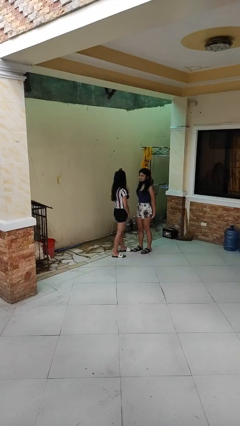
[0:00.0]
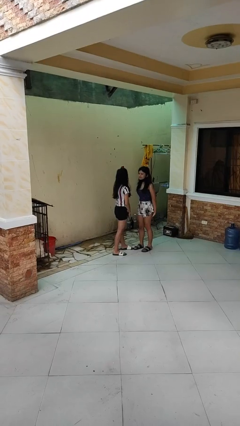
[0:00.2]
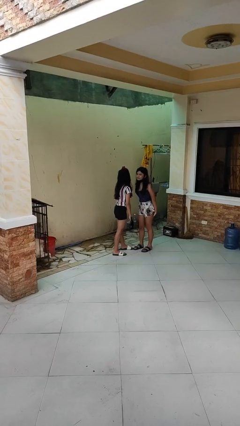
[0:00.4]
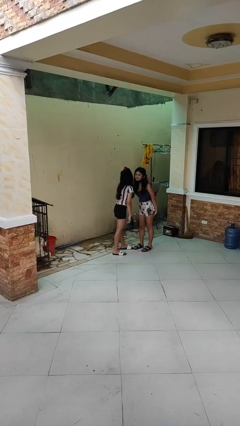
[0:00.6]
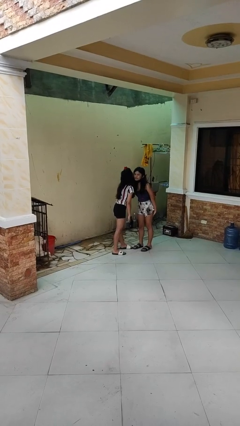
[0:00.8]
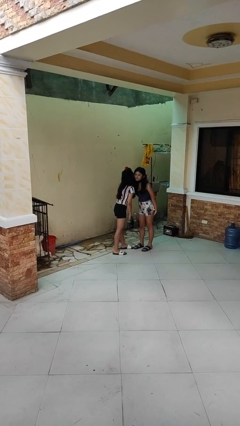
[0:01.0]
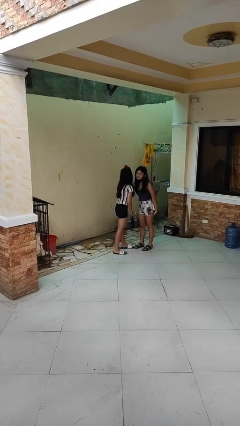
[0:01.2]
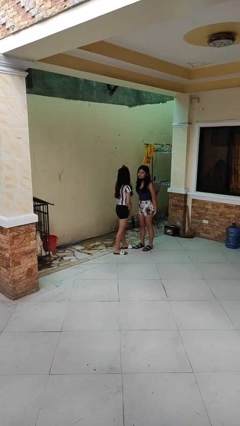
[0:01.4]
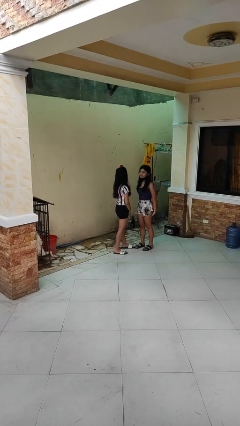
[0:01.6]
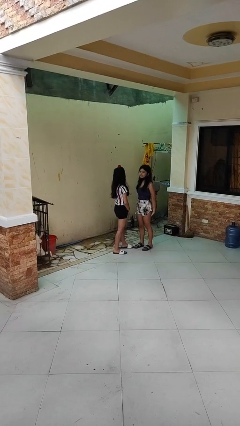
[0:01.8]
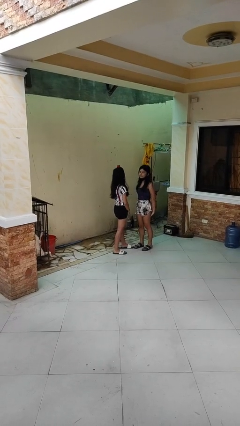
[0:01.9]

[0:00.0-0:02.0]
person kisses cheek of person

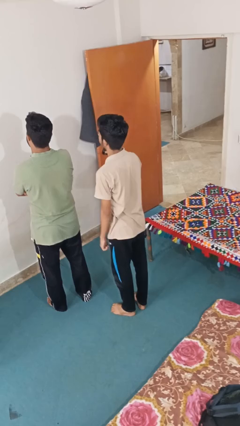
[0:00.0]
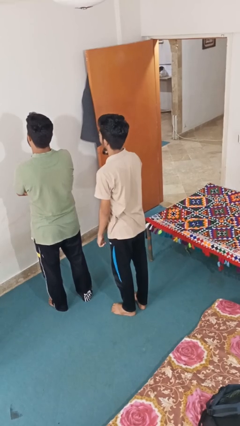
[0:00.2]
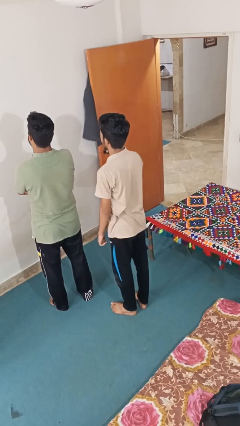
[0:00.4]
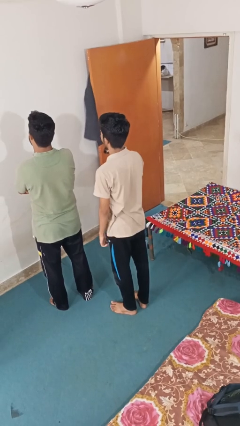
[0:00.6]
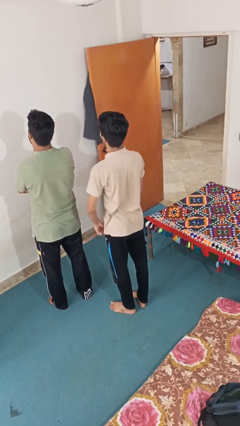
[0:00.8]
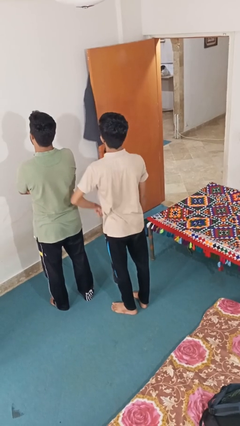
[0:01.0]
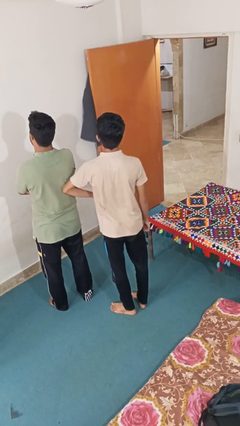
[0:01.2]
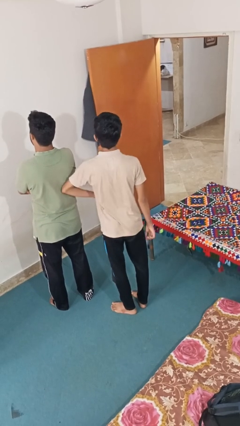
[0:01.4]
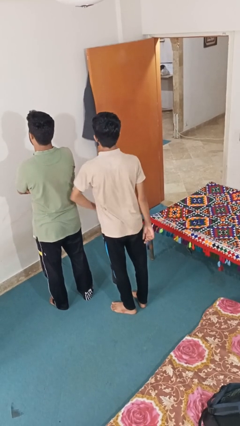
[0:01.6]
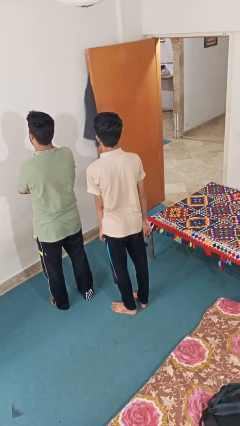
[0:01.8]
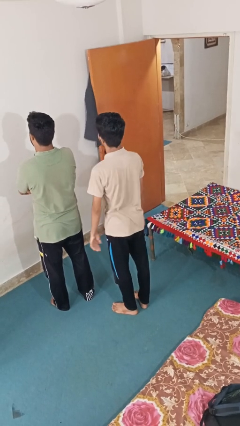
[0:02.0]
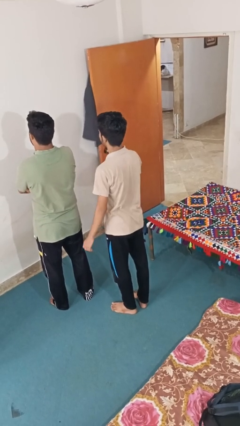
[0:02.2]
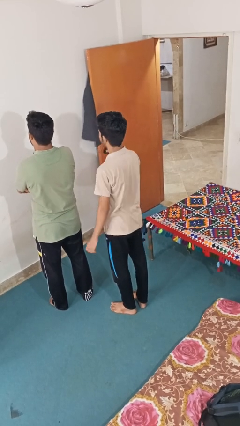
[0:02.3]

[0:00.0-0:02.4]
person nudges person with elbow

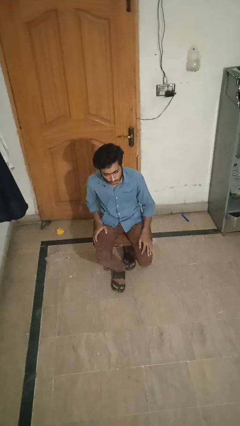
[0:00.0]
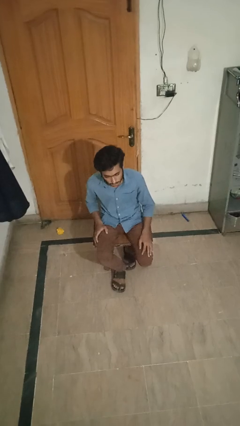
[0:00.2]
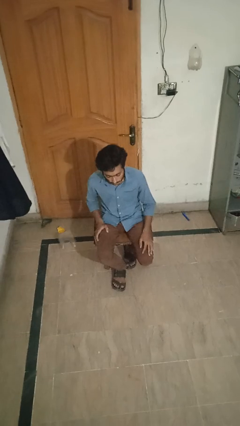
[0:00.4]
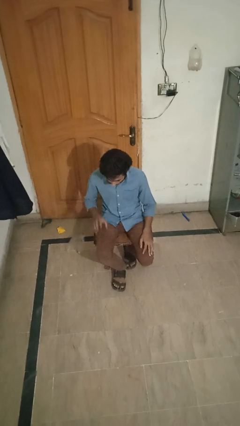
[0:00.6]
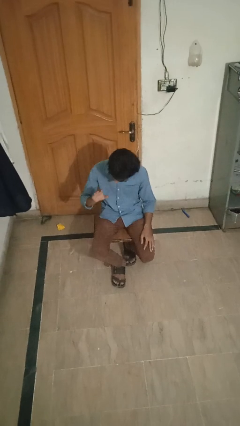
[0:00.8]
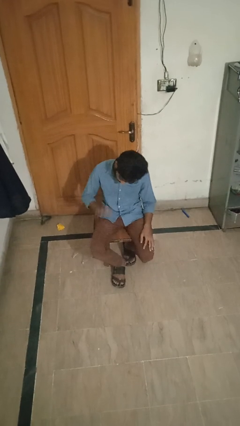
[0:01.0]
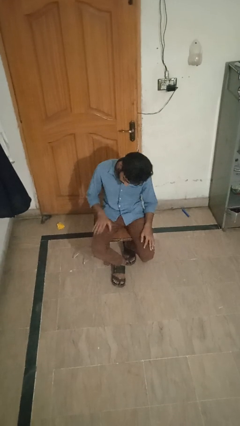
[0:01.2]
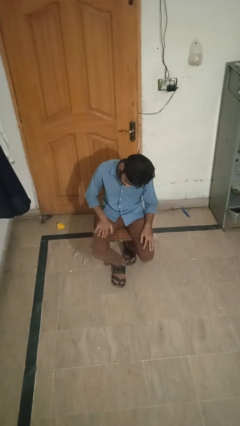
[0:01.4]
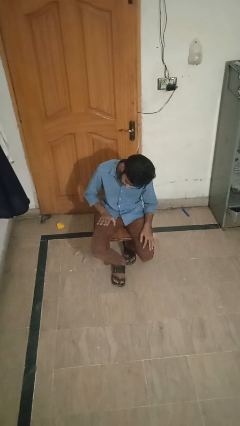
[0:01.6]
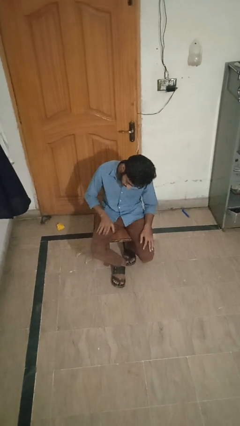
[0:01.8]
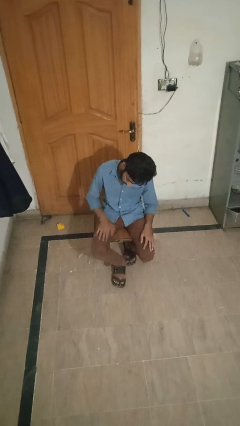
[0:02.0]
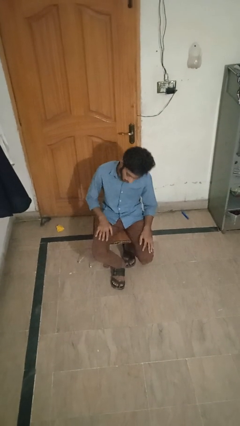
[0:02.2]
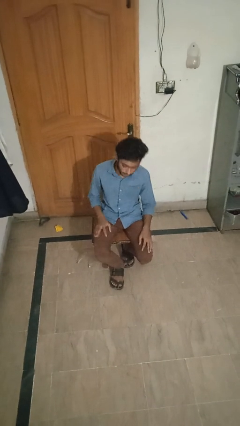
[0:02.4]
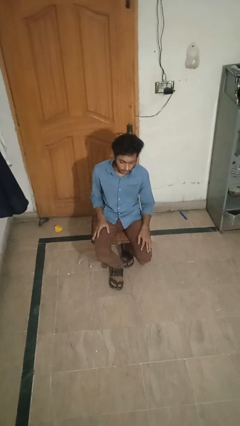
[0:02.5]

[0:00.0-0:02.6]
person slaps hands on thighs

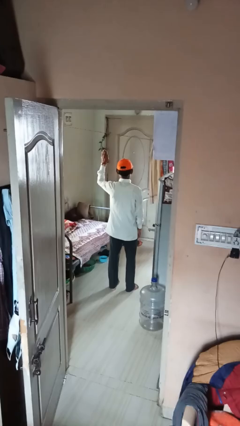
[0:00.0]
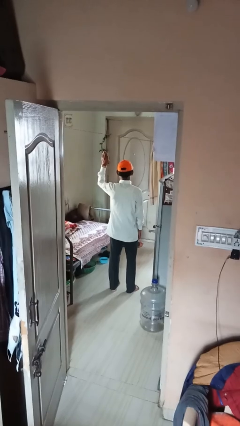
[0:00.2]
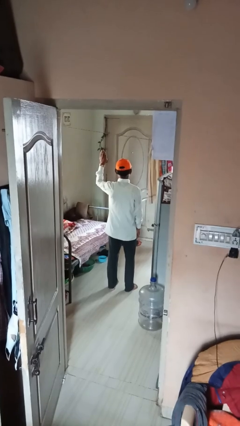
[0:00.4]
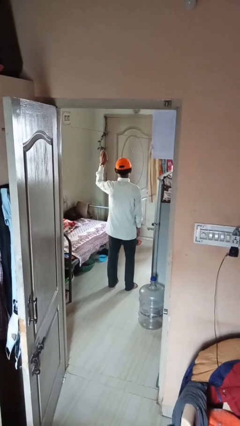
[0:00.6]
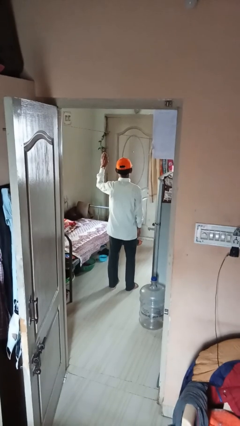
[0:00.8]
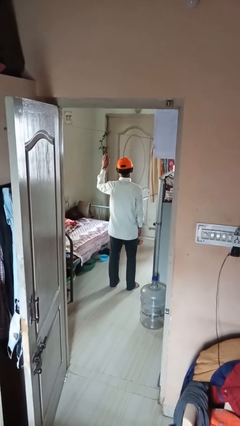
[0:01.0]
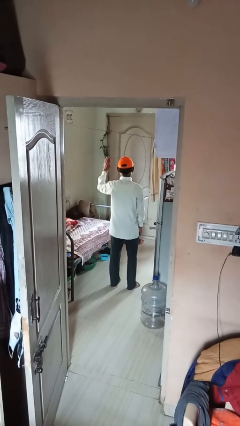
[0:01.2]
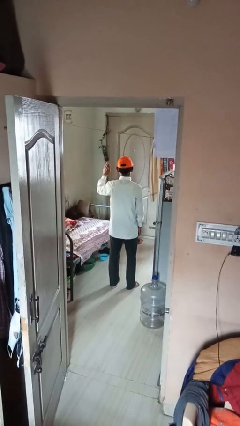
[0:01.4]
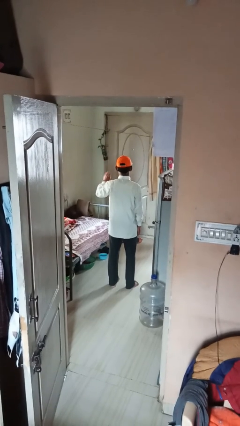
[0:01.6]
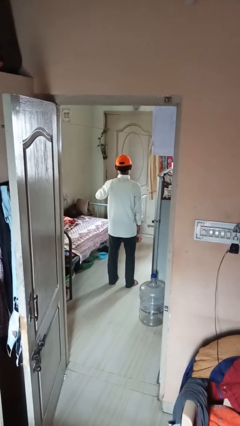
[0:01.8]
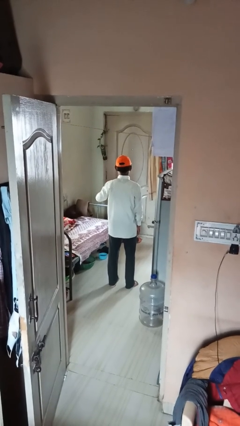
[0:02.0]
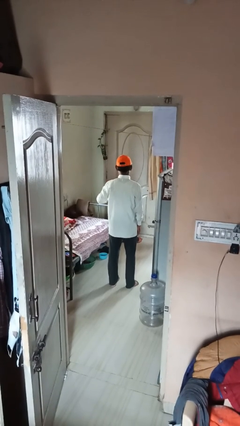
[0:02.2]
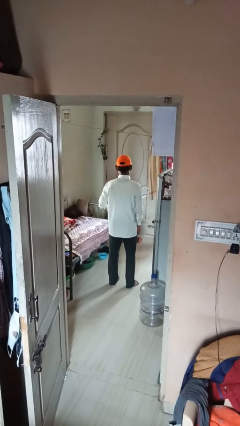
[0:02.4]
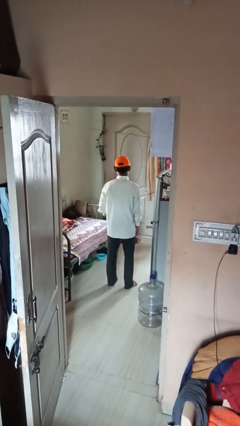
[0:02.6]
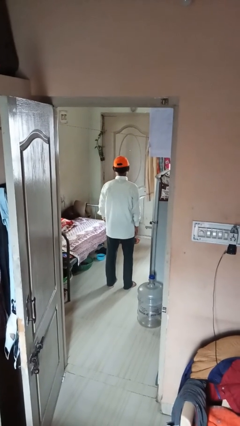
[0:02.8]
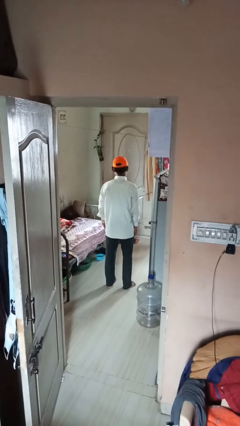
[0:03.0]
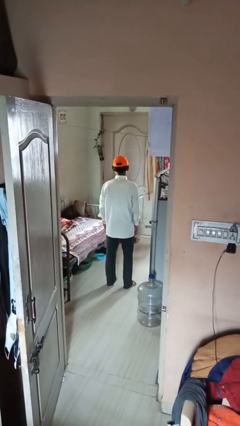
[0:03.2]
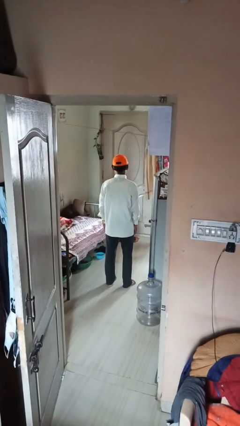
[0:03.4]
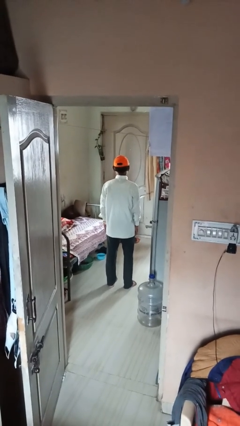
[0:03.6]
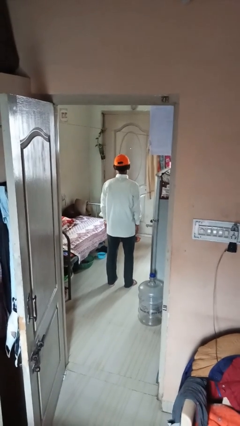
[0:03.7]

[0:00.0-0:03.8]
person gestures lower hand

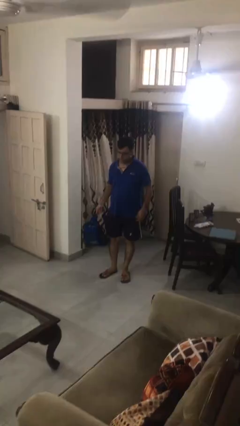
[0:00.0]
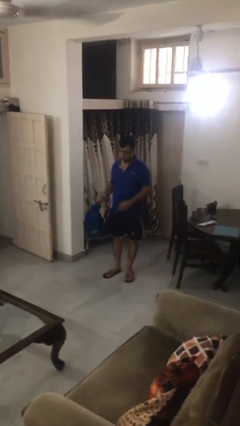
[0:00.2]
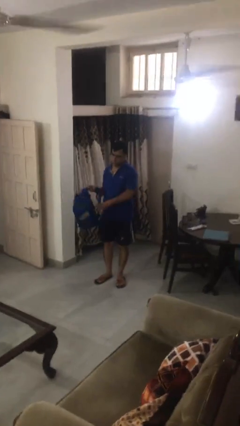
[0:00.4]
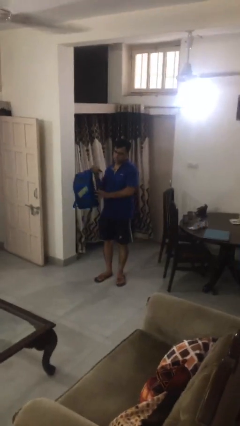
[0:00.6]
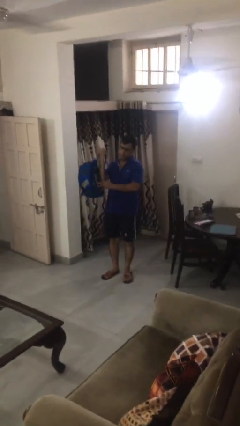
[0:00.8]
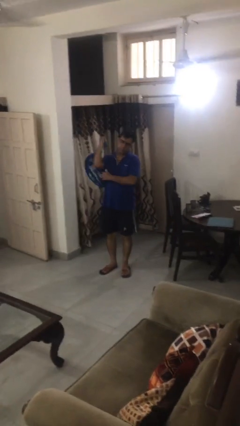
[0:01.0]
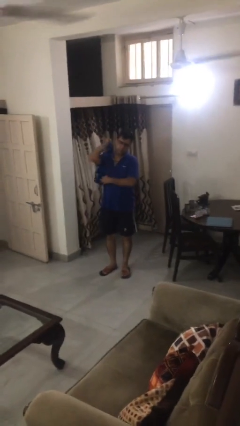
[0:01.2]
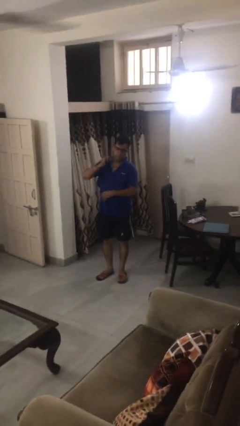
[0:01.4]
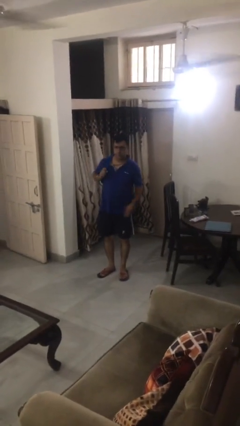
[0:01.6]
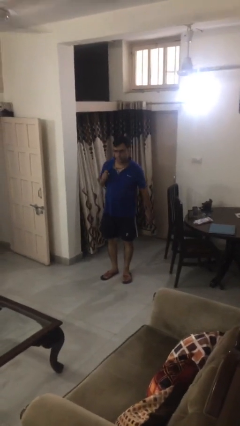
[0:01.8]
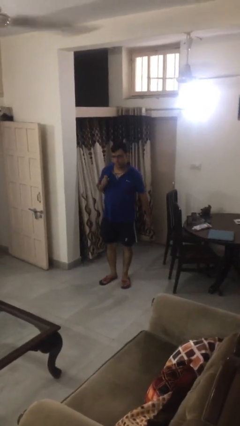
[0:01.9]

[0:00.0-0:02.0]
person puts on backpack

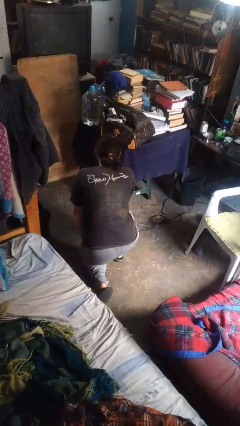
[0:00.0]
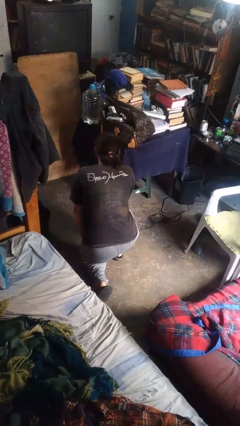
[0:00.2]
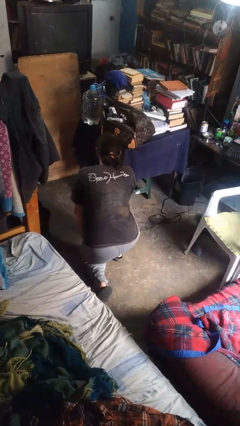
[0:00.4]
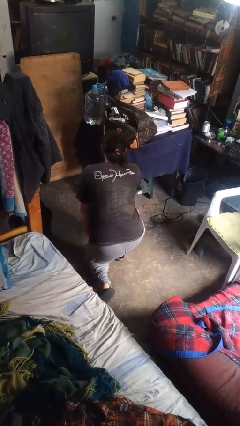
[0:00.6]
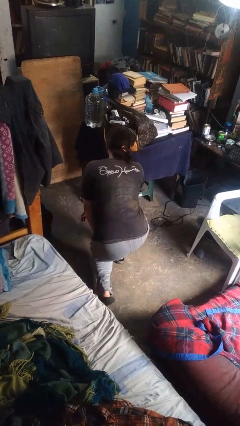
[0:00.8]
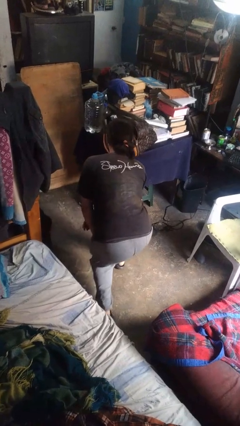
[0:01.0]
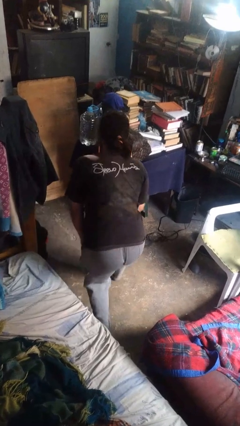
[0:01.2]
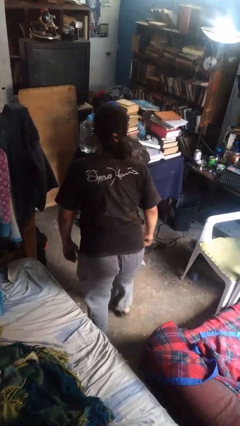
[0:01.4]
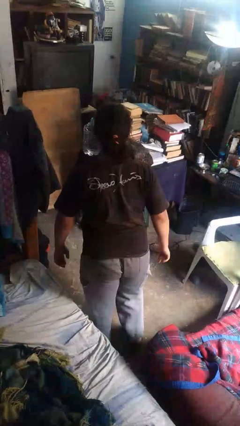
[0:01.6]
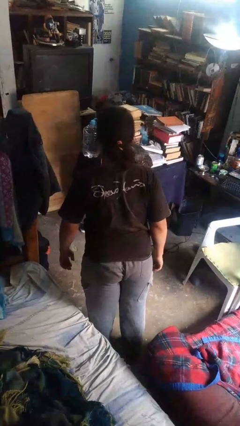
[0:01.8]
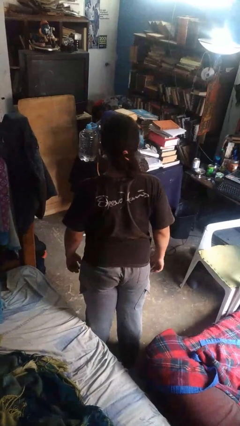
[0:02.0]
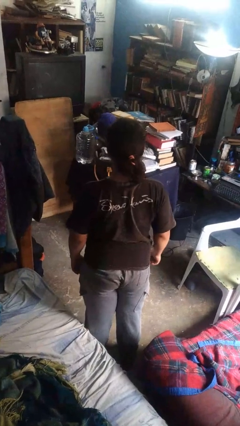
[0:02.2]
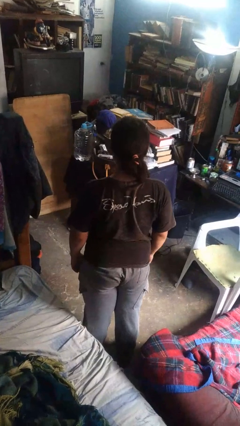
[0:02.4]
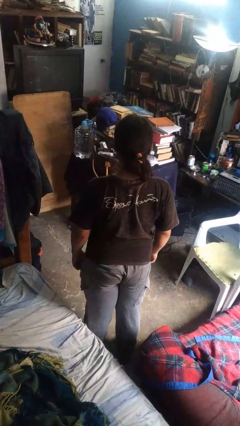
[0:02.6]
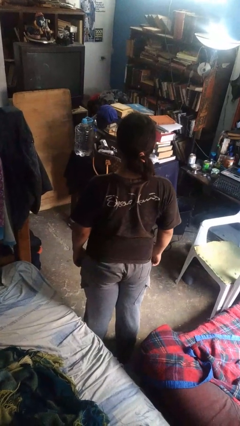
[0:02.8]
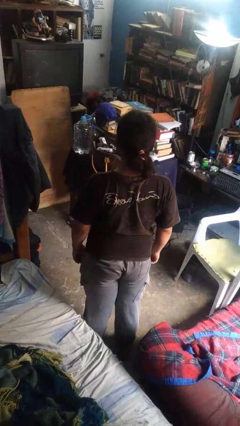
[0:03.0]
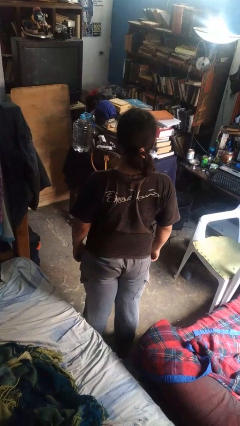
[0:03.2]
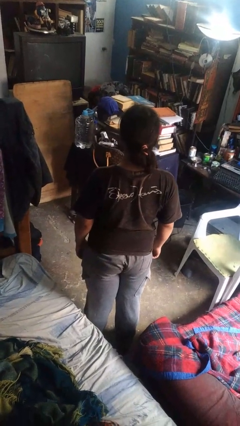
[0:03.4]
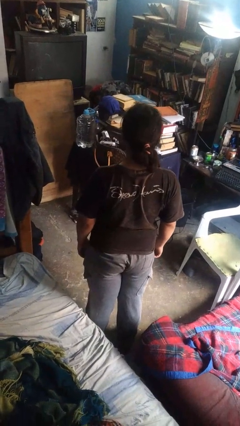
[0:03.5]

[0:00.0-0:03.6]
person stands up from floor

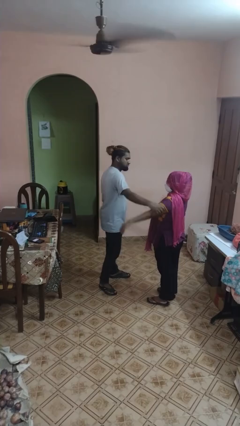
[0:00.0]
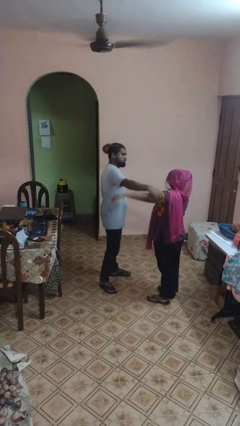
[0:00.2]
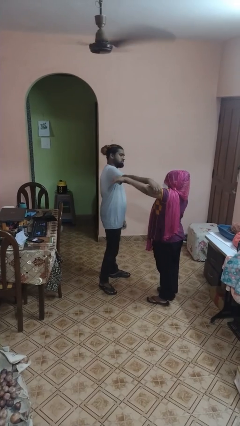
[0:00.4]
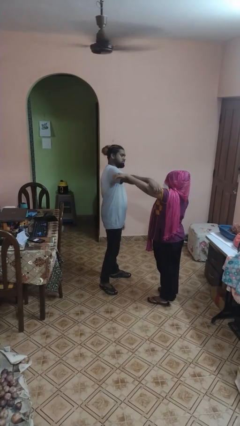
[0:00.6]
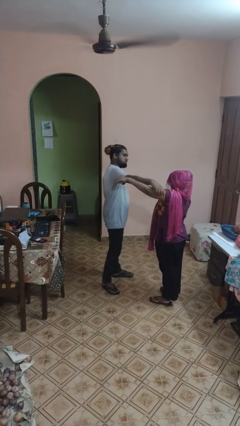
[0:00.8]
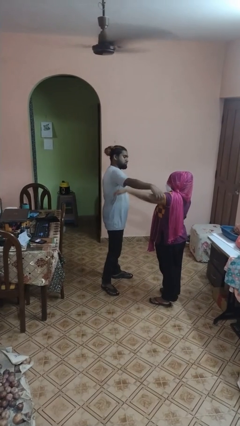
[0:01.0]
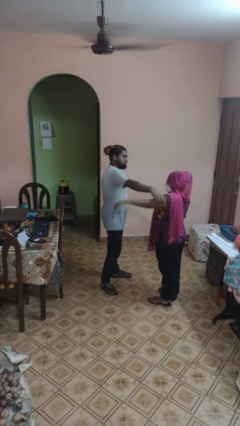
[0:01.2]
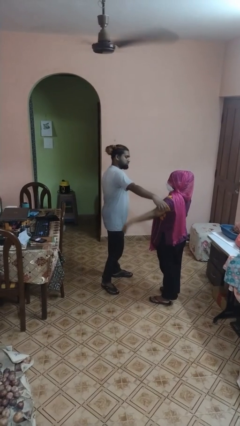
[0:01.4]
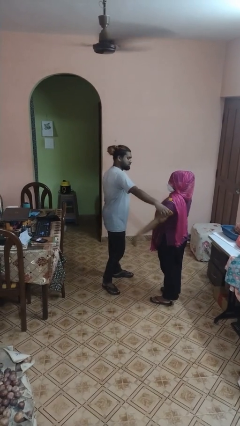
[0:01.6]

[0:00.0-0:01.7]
person grabs person by bicep
